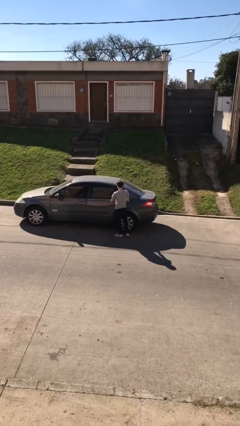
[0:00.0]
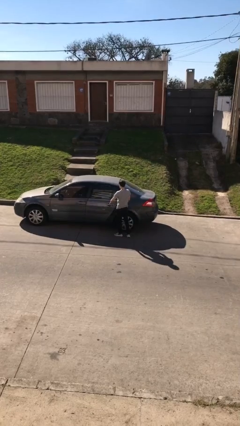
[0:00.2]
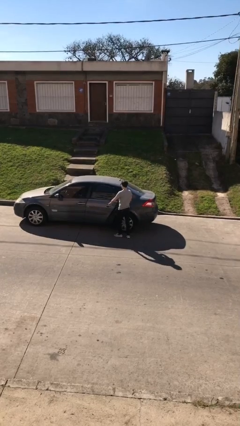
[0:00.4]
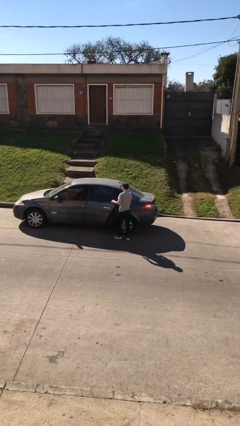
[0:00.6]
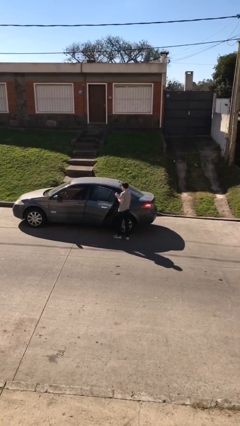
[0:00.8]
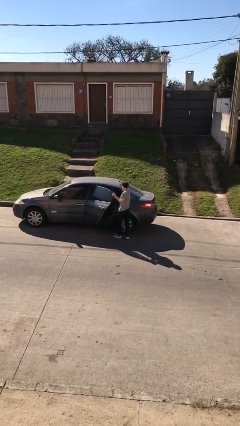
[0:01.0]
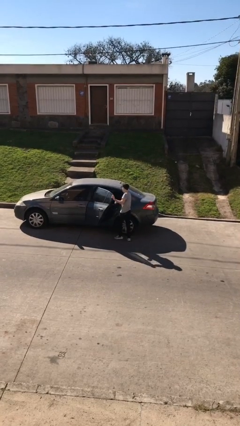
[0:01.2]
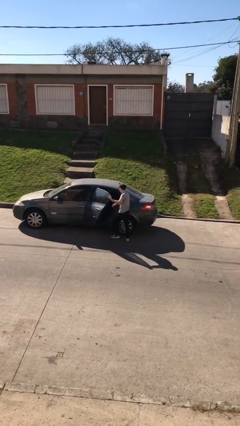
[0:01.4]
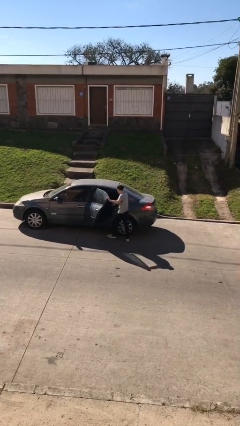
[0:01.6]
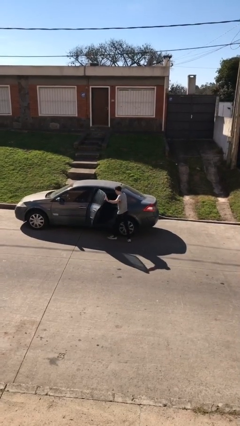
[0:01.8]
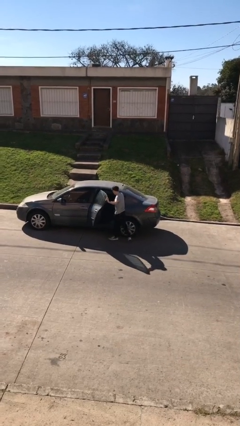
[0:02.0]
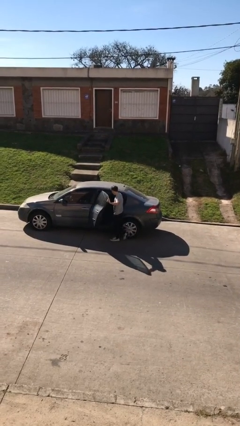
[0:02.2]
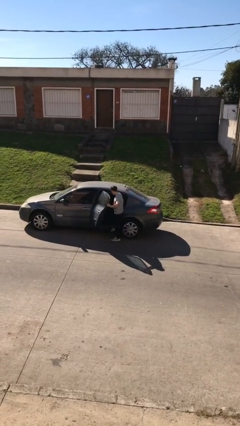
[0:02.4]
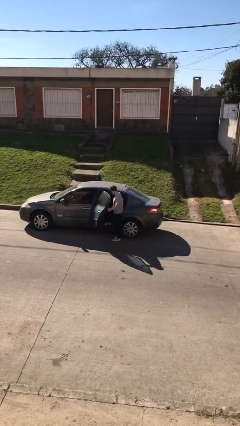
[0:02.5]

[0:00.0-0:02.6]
person opens car door

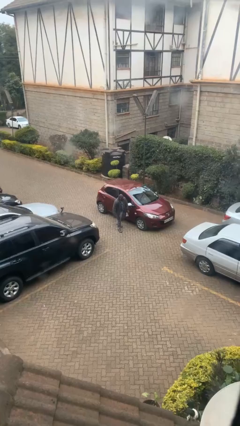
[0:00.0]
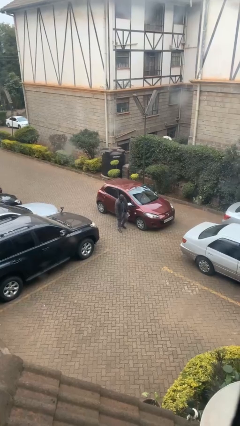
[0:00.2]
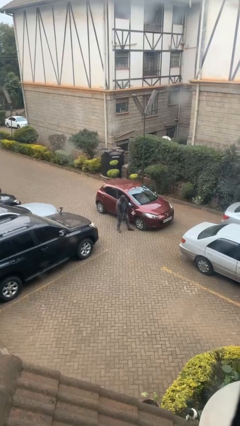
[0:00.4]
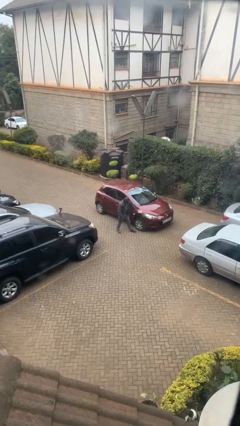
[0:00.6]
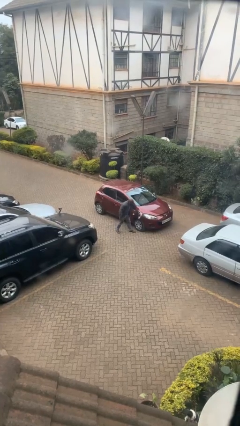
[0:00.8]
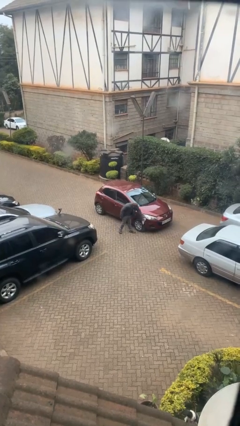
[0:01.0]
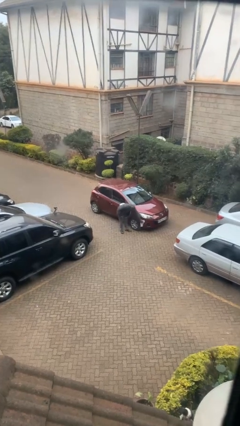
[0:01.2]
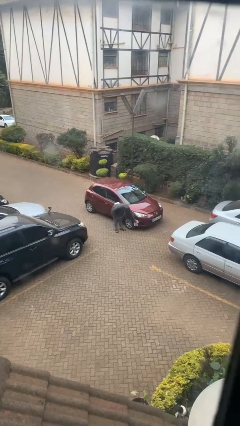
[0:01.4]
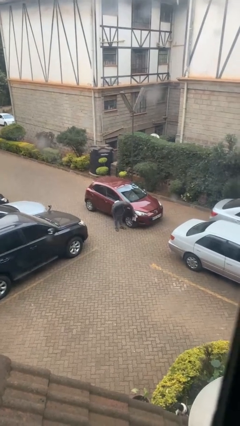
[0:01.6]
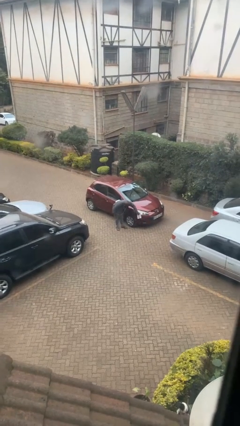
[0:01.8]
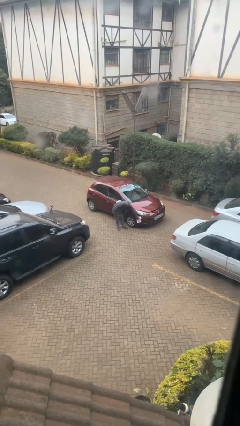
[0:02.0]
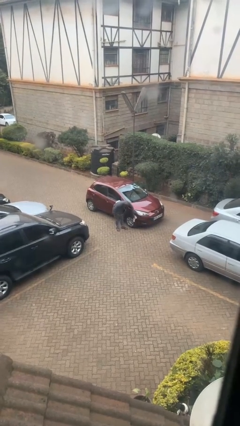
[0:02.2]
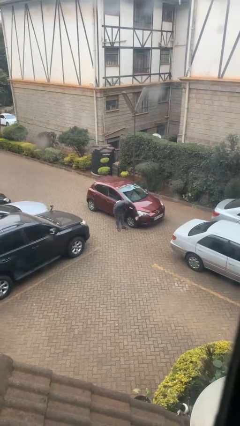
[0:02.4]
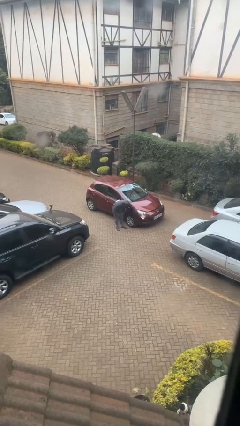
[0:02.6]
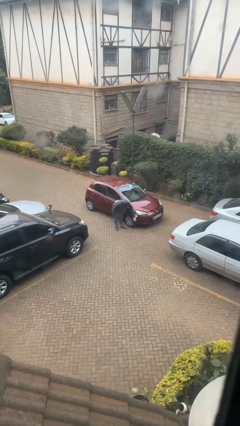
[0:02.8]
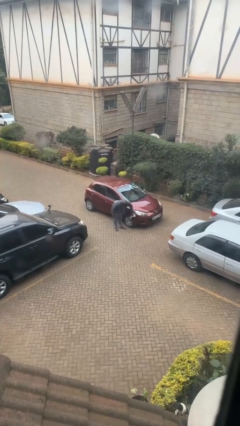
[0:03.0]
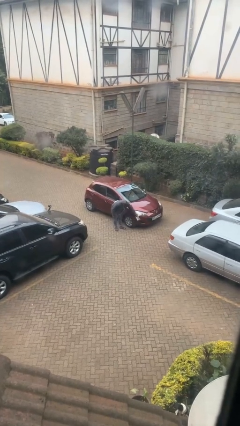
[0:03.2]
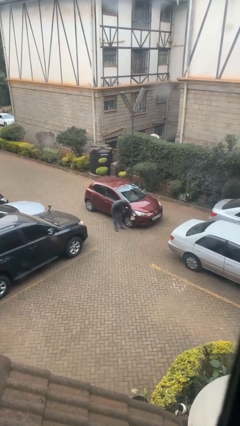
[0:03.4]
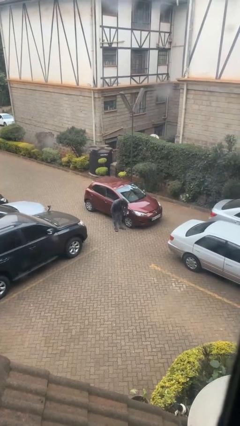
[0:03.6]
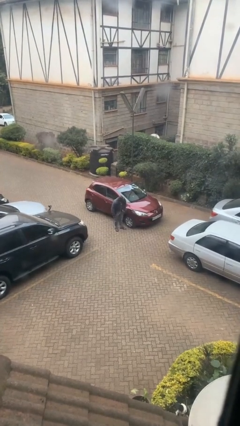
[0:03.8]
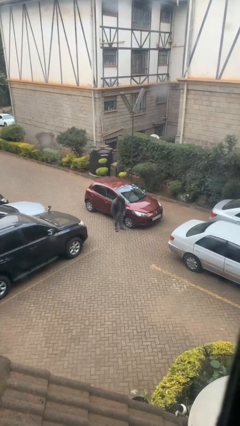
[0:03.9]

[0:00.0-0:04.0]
person polishes car with rag

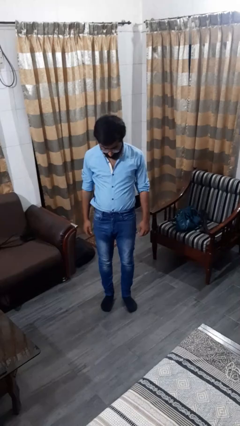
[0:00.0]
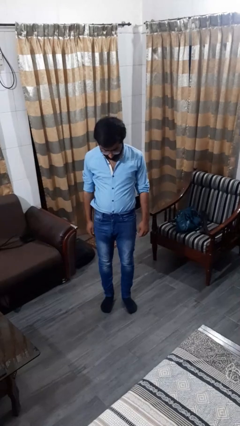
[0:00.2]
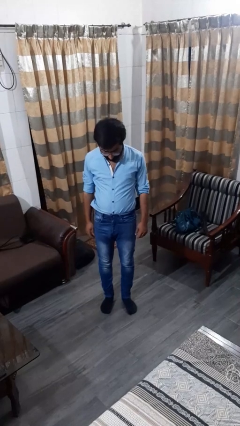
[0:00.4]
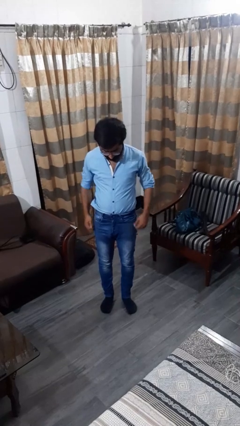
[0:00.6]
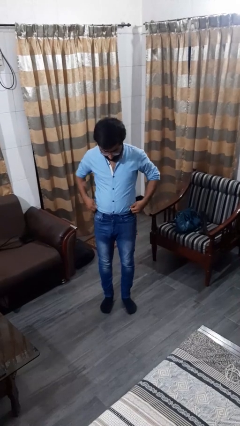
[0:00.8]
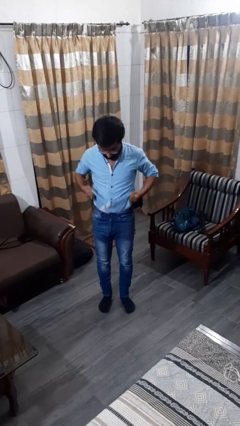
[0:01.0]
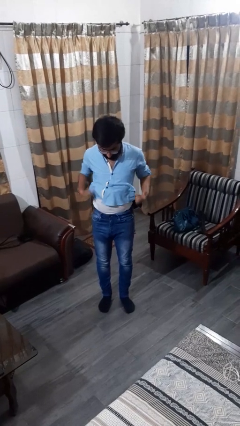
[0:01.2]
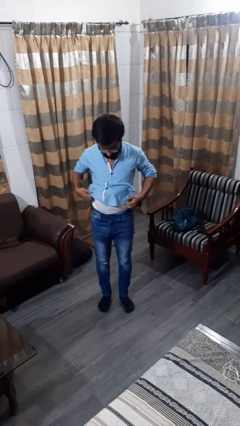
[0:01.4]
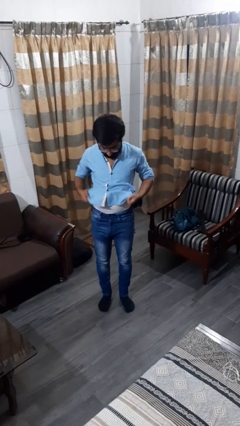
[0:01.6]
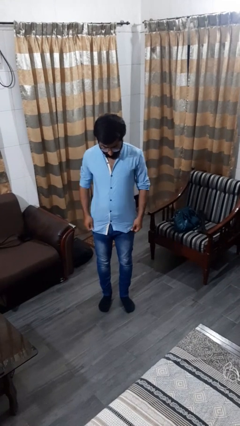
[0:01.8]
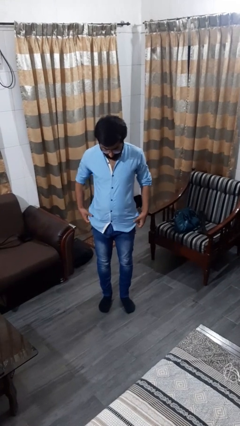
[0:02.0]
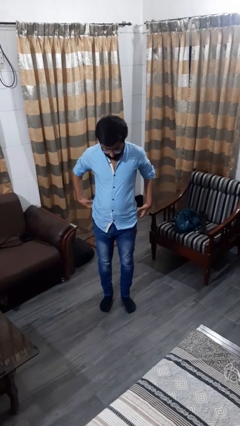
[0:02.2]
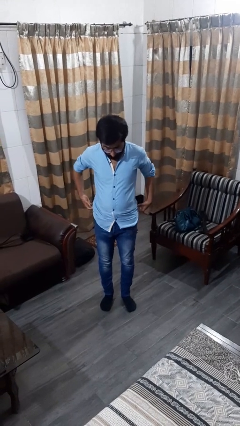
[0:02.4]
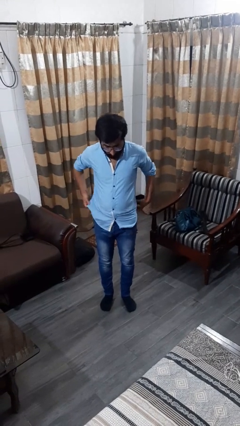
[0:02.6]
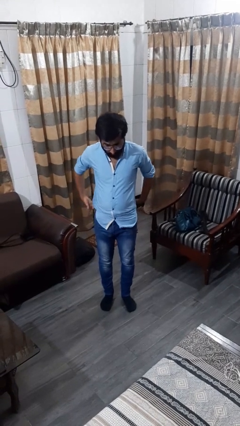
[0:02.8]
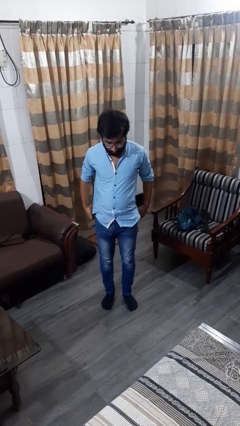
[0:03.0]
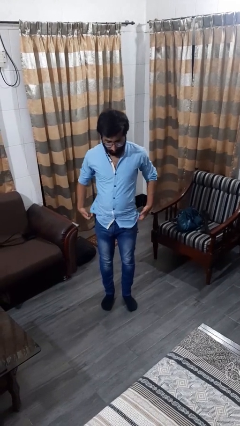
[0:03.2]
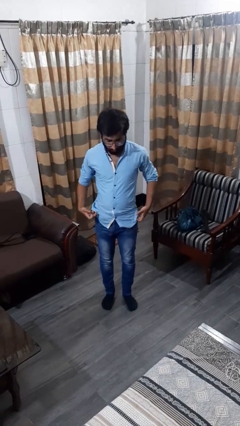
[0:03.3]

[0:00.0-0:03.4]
person untucks shirt

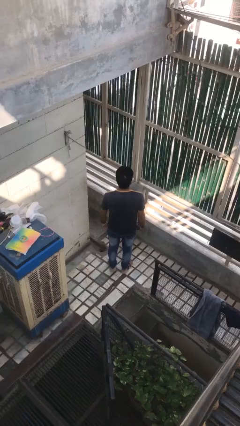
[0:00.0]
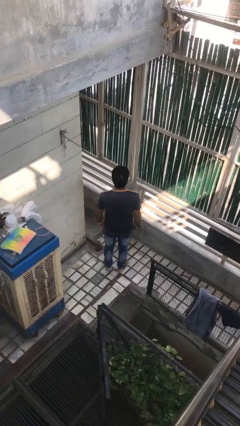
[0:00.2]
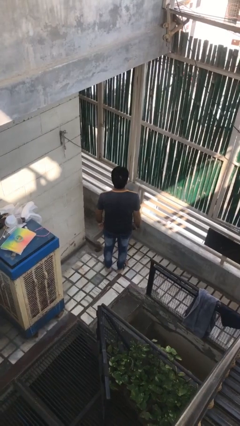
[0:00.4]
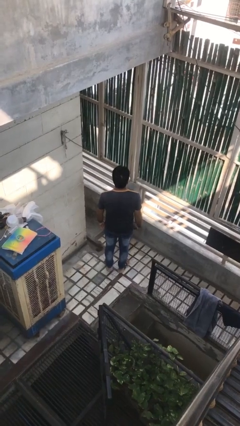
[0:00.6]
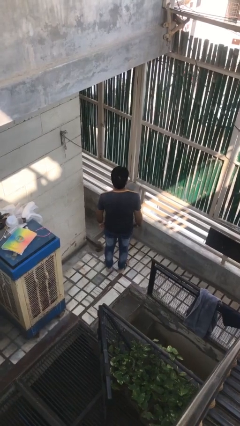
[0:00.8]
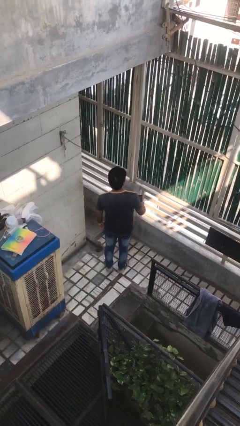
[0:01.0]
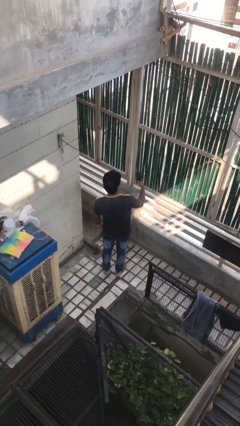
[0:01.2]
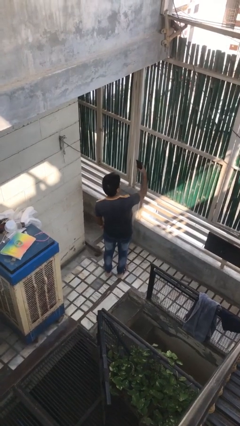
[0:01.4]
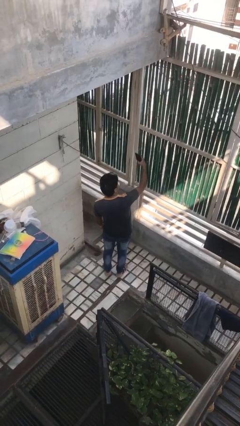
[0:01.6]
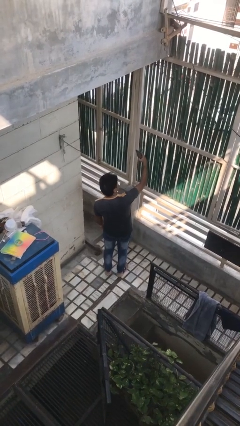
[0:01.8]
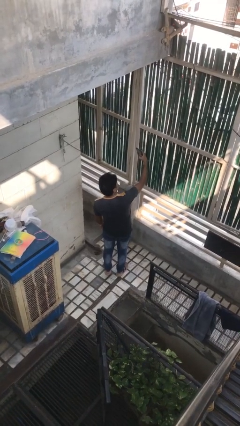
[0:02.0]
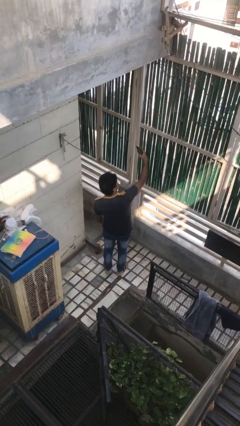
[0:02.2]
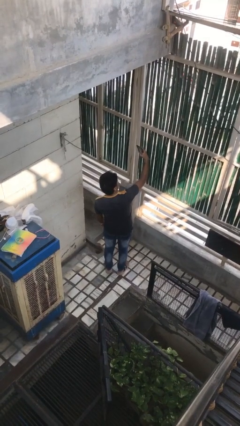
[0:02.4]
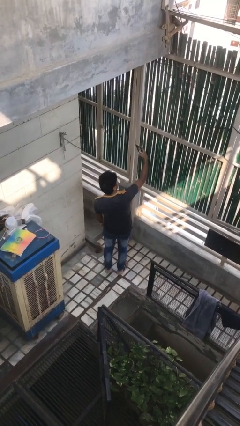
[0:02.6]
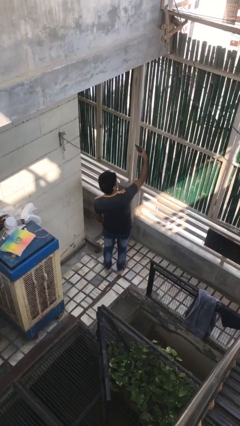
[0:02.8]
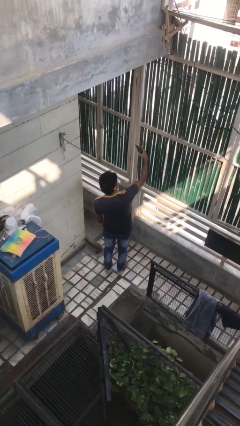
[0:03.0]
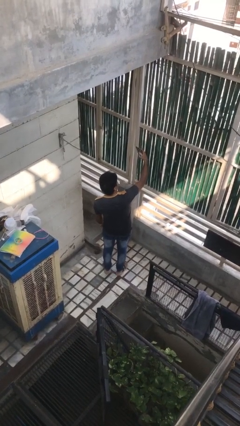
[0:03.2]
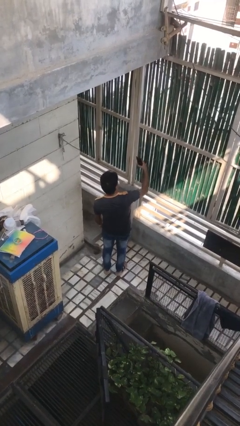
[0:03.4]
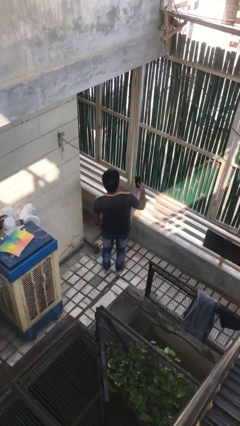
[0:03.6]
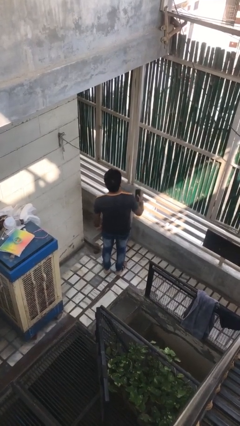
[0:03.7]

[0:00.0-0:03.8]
person takes selfie

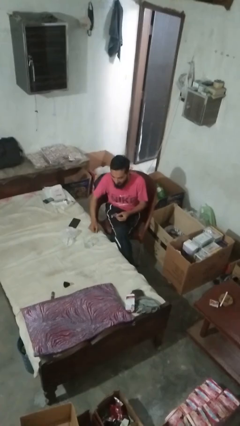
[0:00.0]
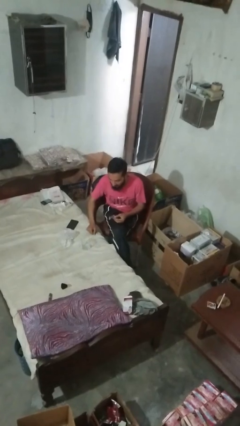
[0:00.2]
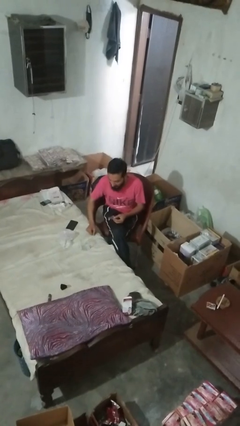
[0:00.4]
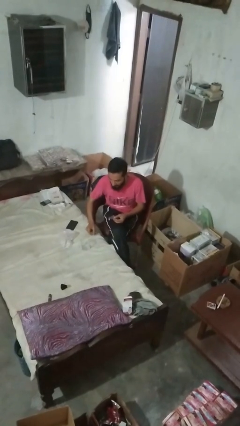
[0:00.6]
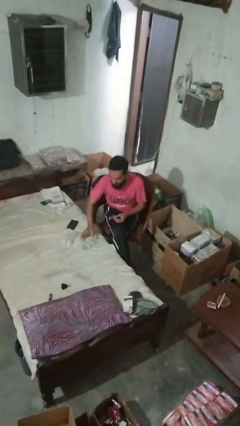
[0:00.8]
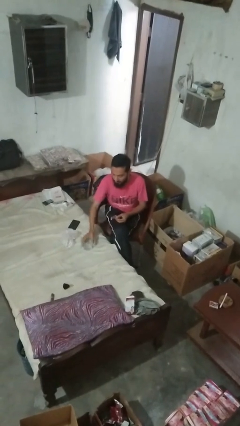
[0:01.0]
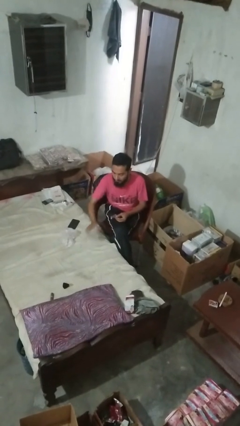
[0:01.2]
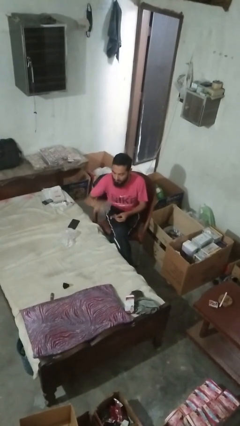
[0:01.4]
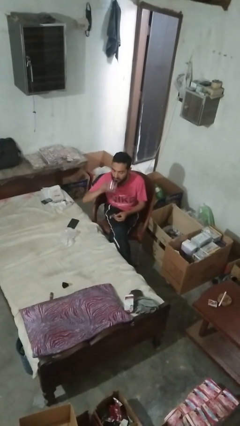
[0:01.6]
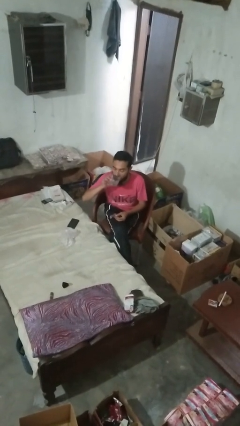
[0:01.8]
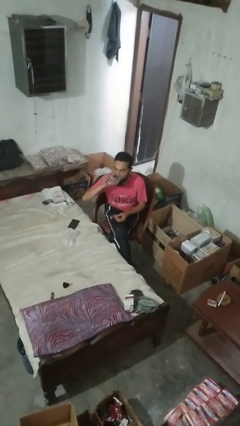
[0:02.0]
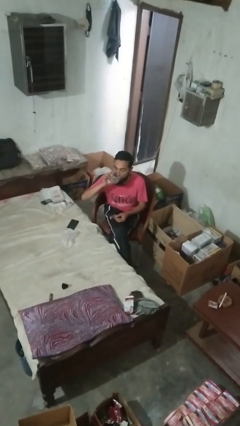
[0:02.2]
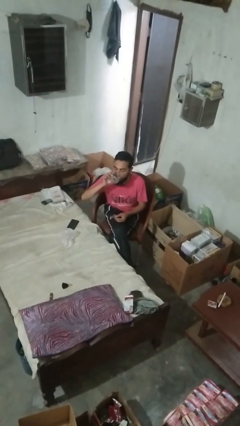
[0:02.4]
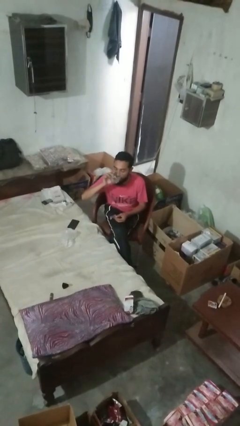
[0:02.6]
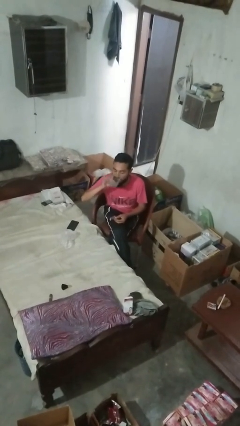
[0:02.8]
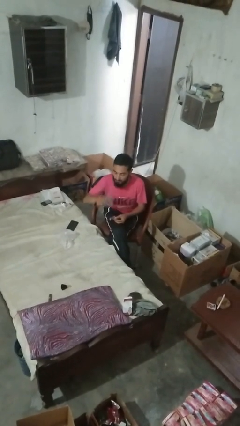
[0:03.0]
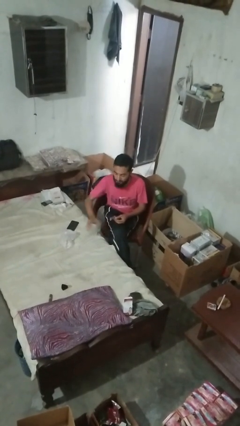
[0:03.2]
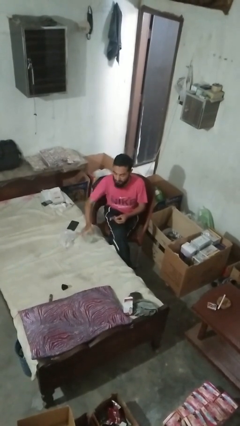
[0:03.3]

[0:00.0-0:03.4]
person drinks from cup
